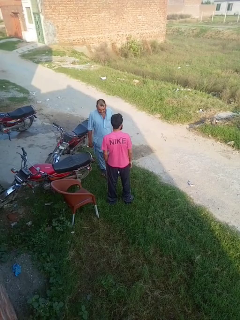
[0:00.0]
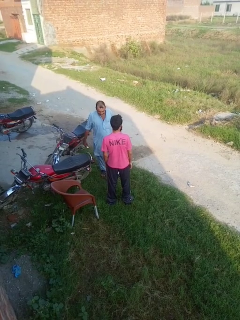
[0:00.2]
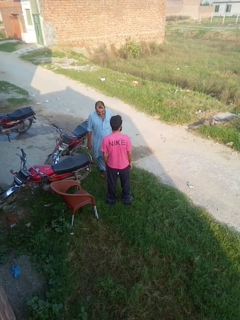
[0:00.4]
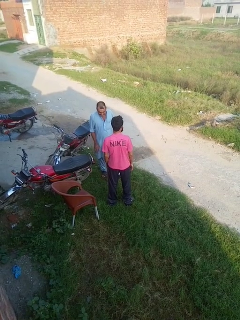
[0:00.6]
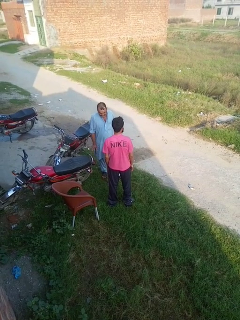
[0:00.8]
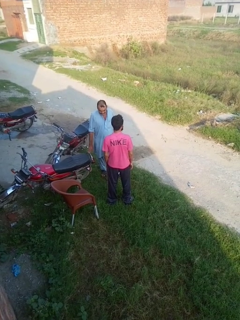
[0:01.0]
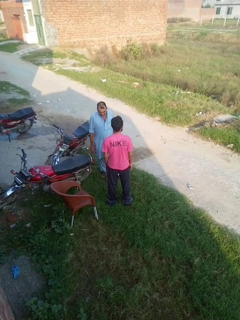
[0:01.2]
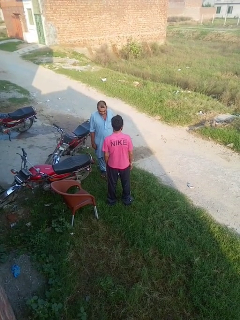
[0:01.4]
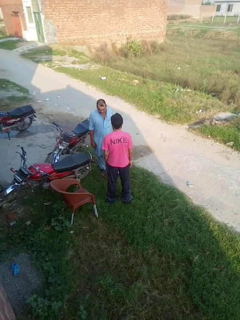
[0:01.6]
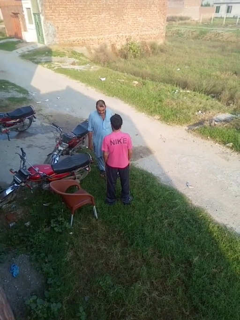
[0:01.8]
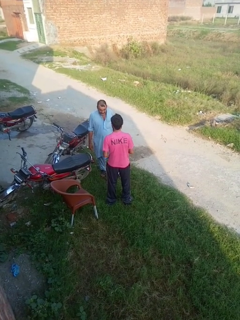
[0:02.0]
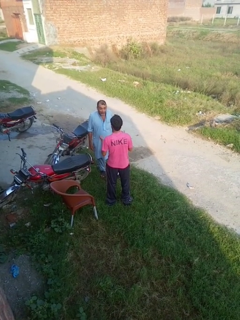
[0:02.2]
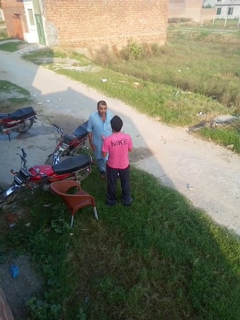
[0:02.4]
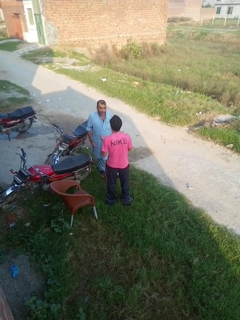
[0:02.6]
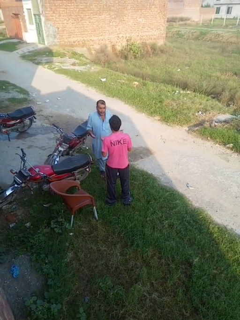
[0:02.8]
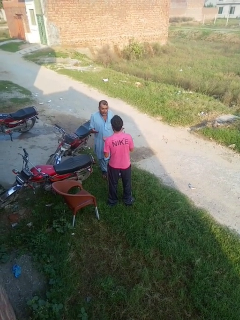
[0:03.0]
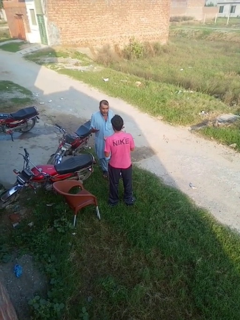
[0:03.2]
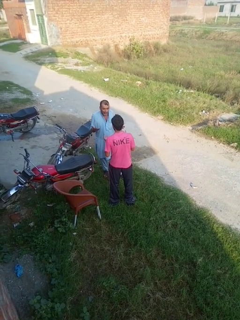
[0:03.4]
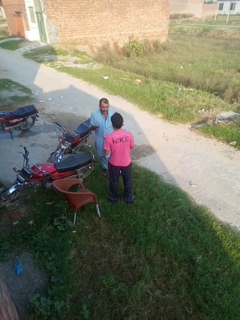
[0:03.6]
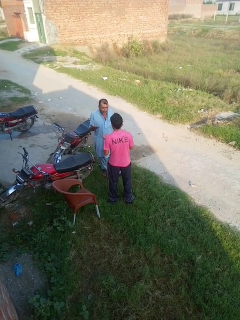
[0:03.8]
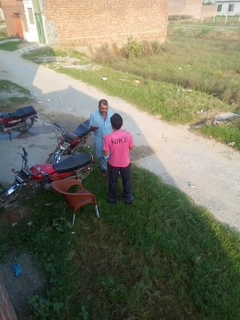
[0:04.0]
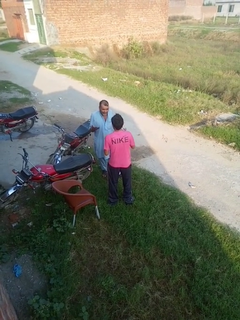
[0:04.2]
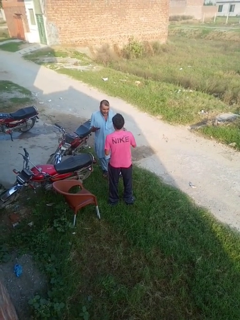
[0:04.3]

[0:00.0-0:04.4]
person laughs with person

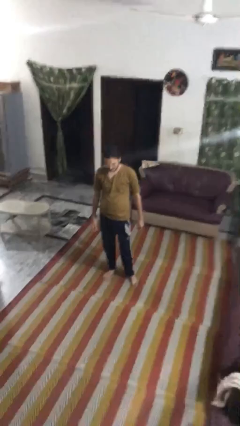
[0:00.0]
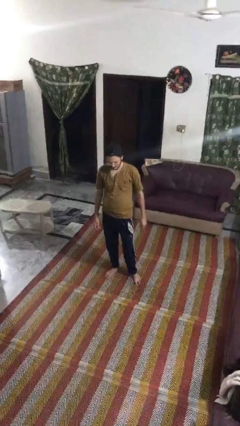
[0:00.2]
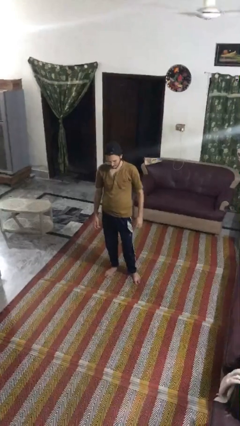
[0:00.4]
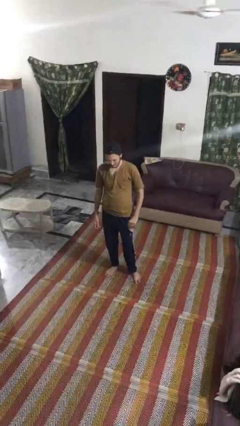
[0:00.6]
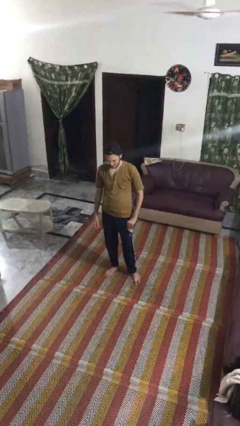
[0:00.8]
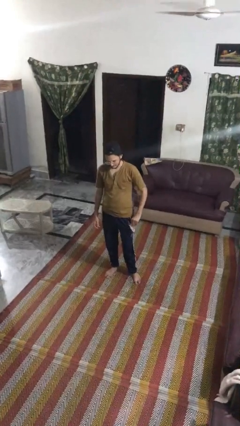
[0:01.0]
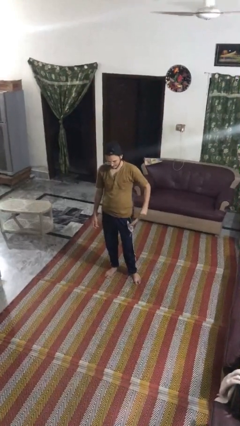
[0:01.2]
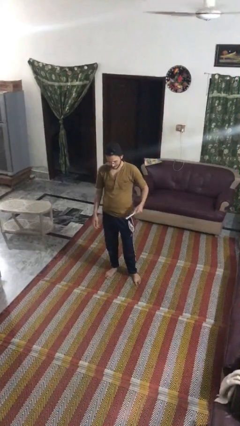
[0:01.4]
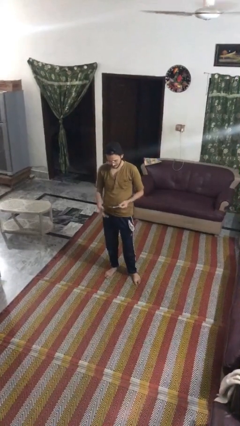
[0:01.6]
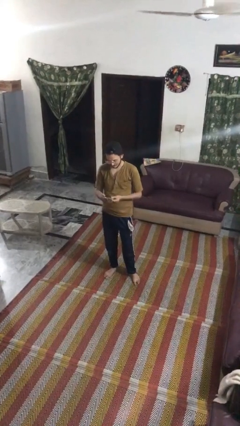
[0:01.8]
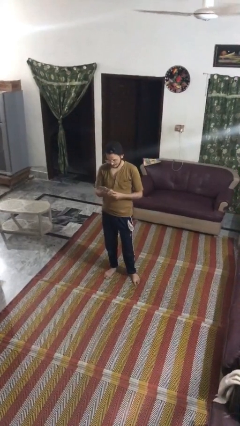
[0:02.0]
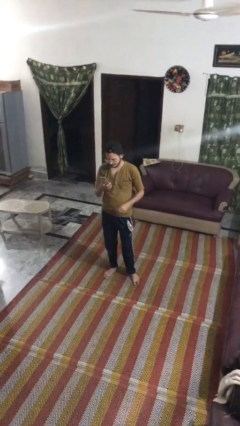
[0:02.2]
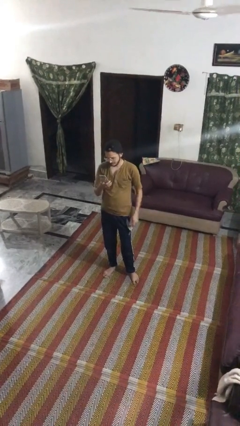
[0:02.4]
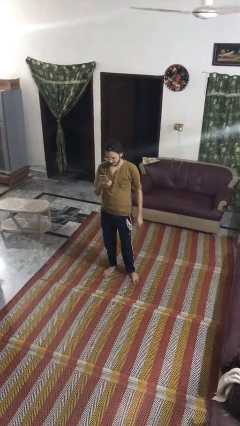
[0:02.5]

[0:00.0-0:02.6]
person takes phone from pocket

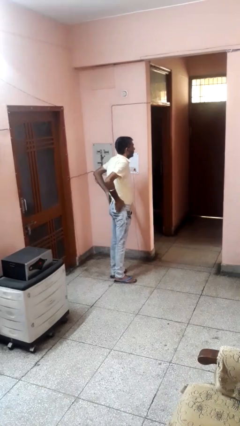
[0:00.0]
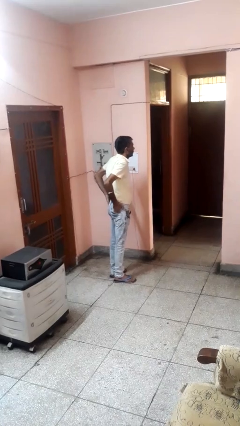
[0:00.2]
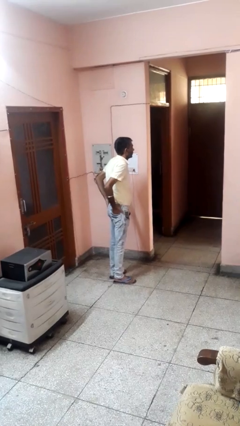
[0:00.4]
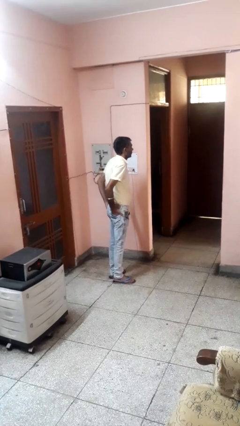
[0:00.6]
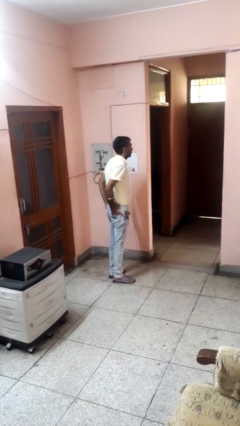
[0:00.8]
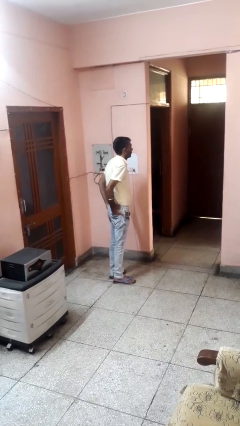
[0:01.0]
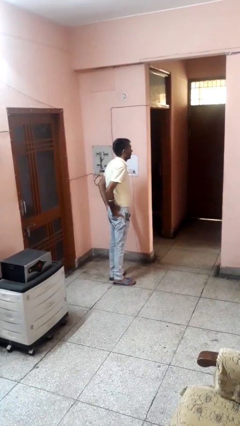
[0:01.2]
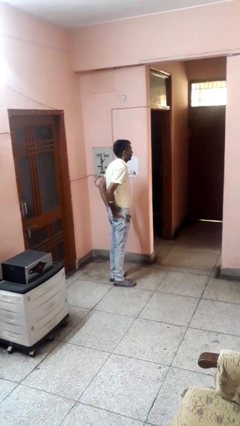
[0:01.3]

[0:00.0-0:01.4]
person puts hands in back pockets

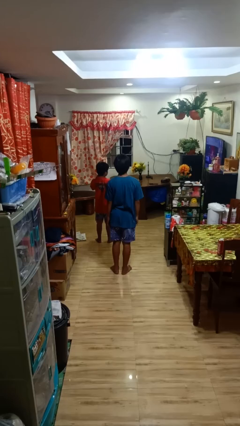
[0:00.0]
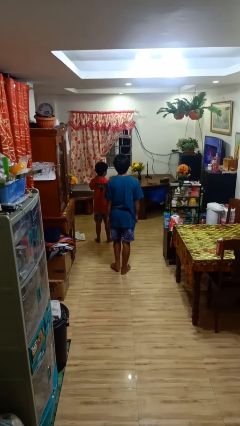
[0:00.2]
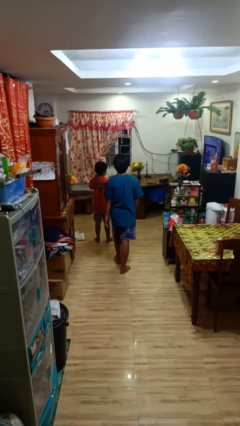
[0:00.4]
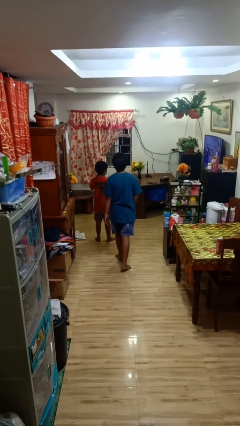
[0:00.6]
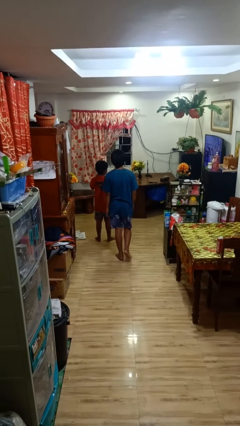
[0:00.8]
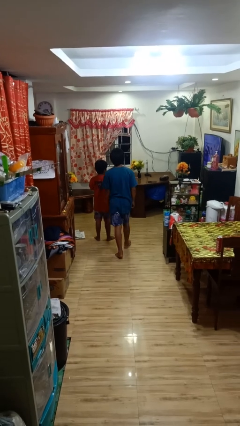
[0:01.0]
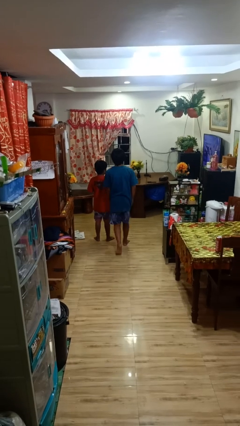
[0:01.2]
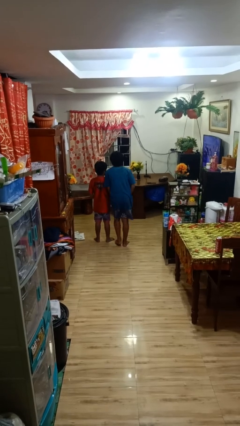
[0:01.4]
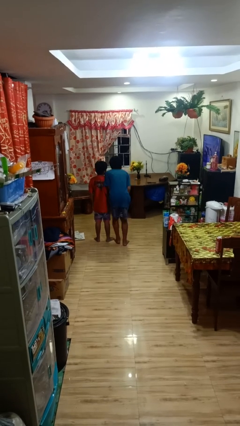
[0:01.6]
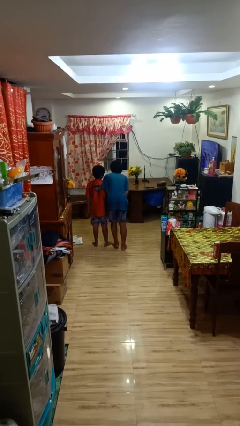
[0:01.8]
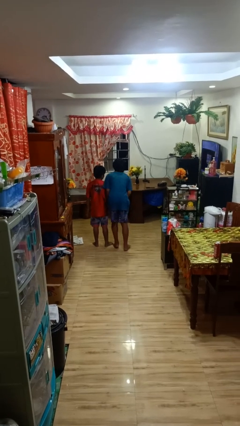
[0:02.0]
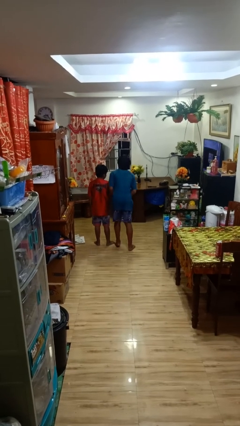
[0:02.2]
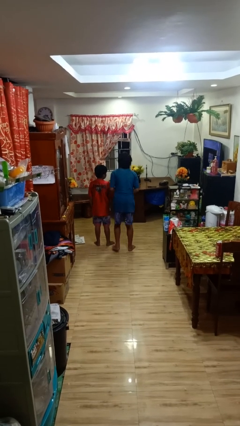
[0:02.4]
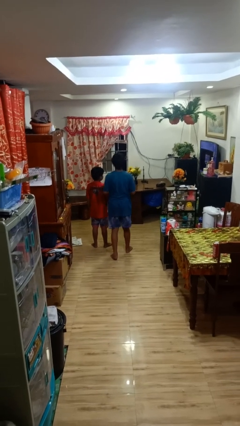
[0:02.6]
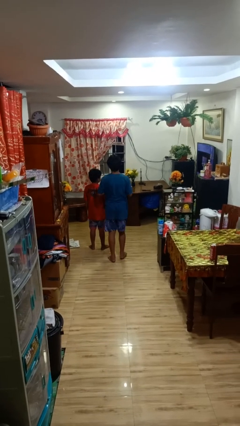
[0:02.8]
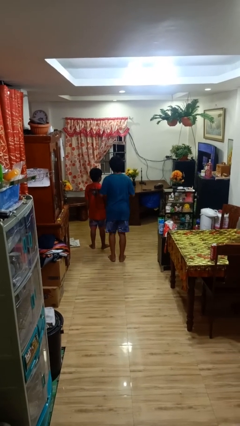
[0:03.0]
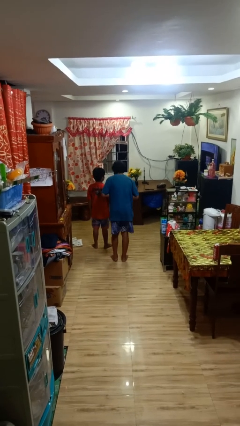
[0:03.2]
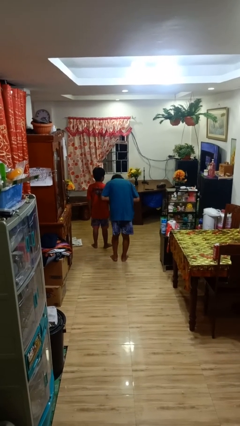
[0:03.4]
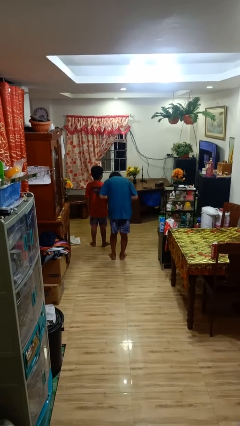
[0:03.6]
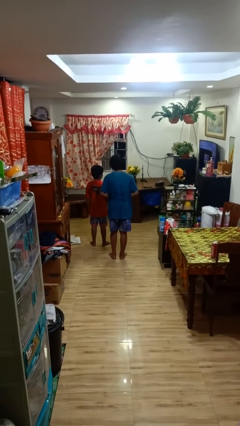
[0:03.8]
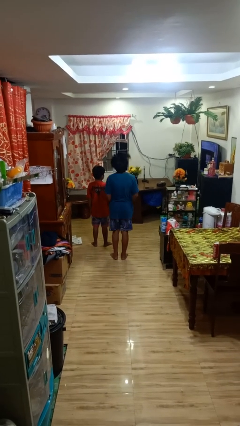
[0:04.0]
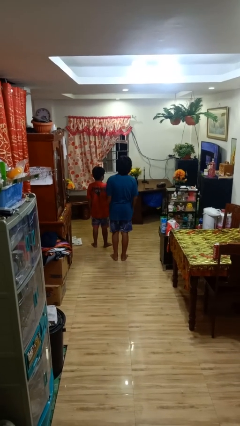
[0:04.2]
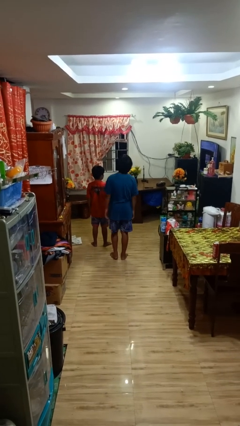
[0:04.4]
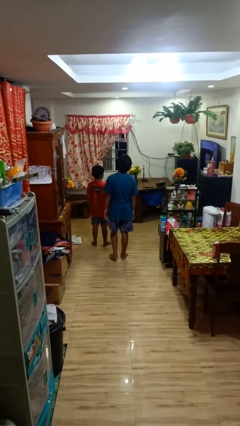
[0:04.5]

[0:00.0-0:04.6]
person bumps into person

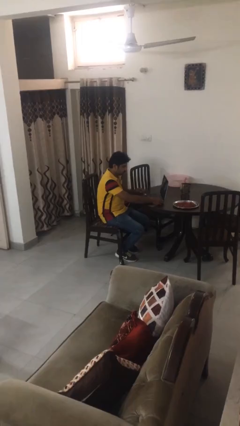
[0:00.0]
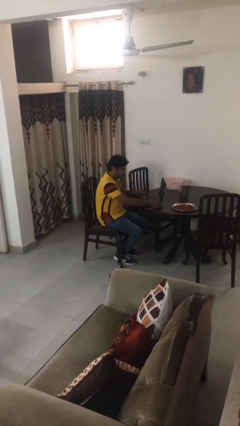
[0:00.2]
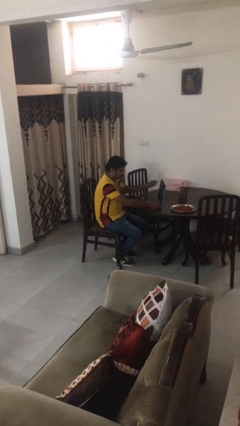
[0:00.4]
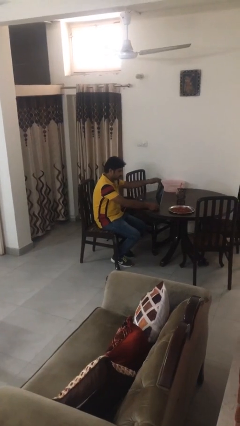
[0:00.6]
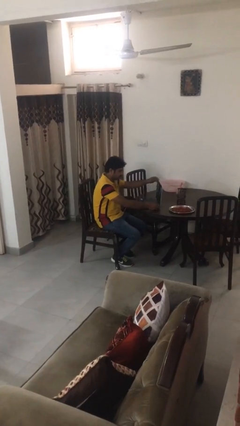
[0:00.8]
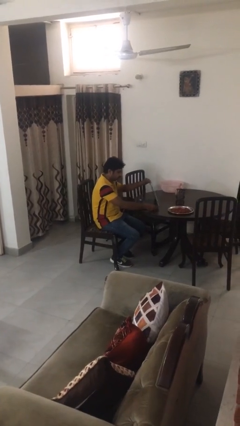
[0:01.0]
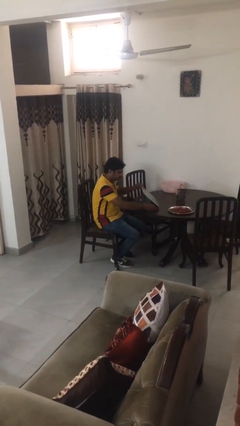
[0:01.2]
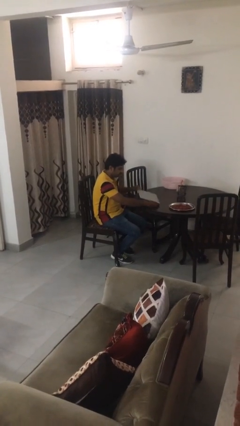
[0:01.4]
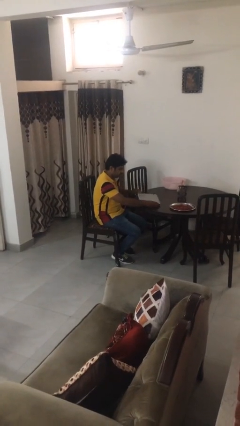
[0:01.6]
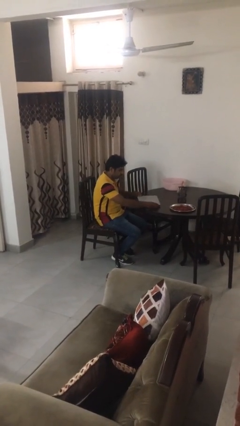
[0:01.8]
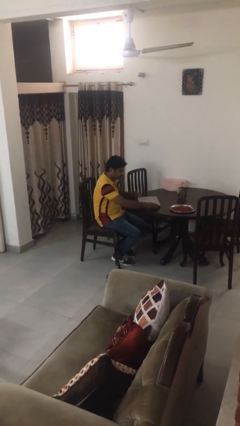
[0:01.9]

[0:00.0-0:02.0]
person closes laptop

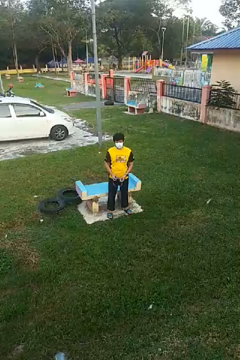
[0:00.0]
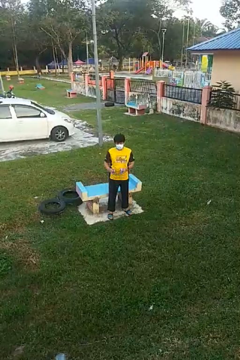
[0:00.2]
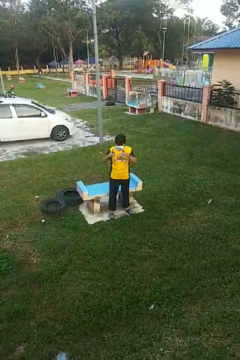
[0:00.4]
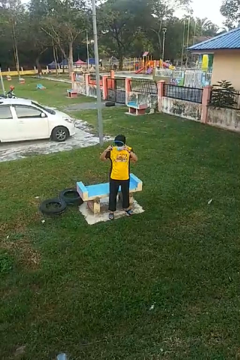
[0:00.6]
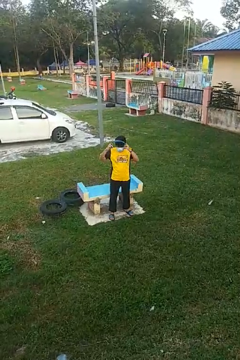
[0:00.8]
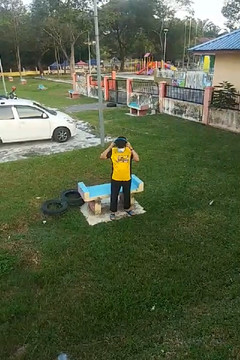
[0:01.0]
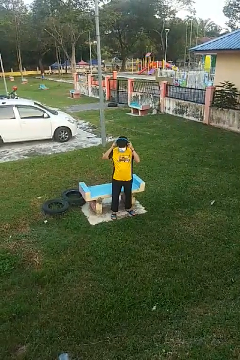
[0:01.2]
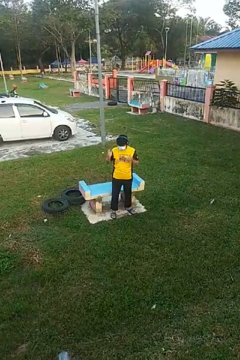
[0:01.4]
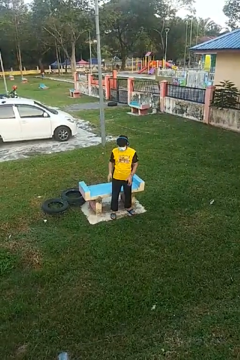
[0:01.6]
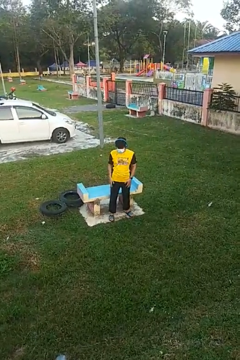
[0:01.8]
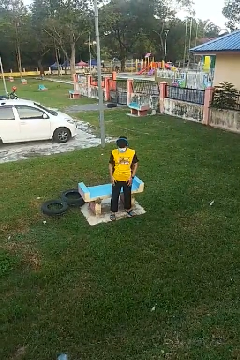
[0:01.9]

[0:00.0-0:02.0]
person puts on headphones

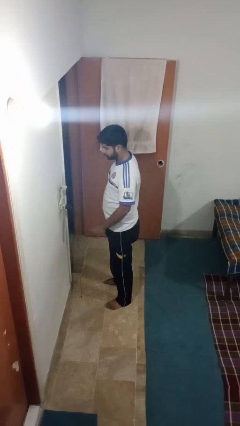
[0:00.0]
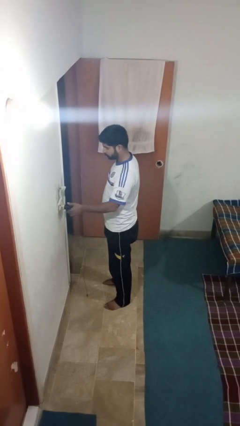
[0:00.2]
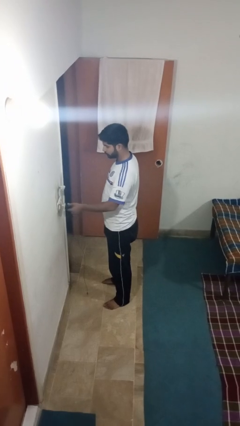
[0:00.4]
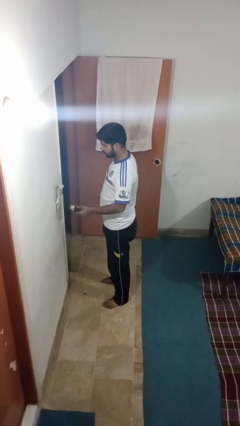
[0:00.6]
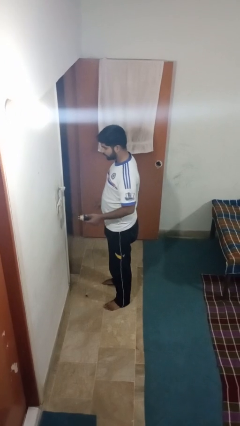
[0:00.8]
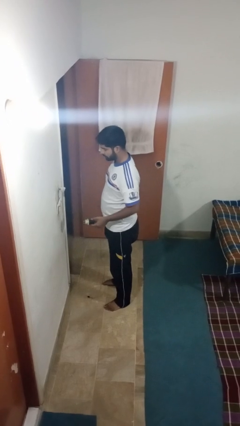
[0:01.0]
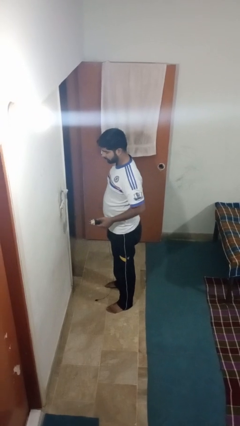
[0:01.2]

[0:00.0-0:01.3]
person unplugs from electrical socket
